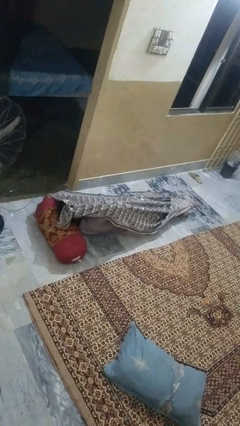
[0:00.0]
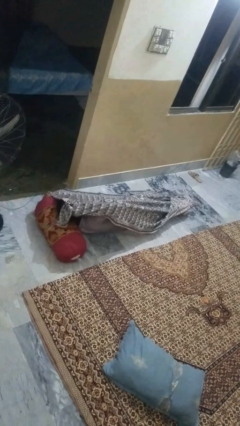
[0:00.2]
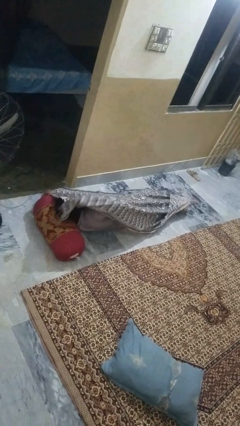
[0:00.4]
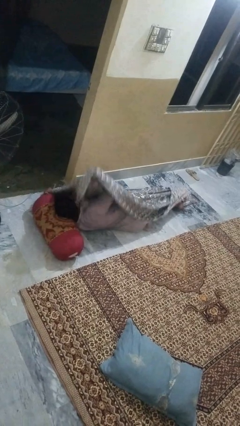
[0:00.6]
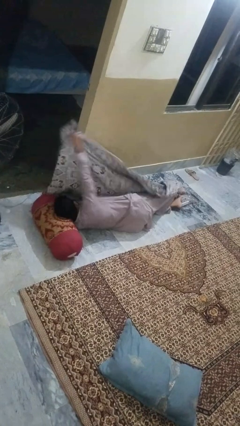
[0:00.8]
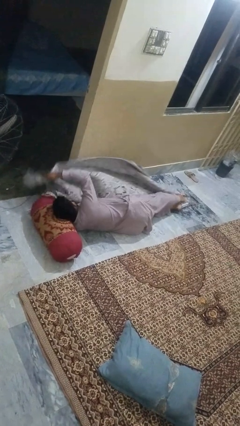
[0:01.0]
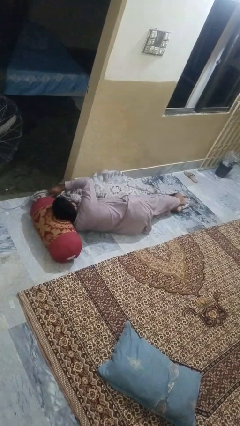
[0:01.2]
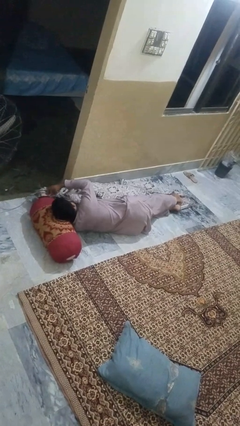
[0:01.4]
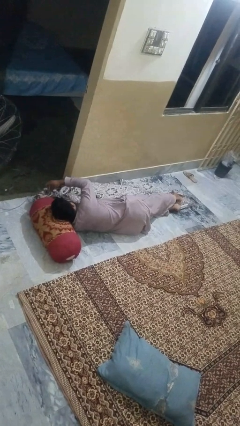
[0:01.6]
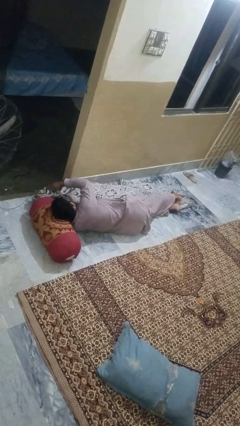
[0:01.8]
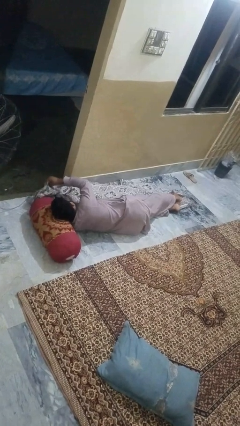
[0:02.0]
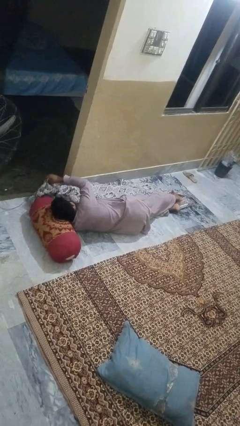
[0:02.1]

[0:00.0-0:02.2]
person uncovers with blanket

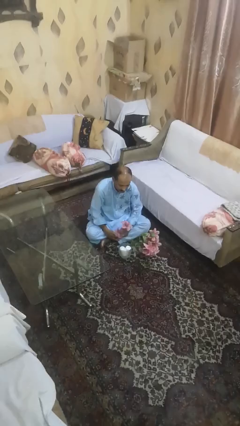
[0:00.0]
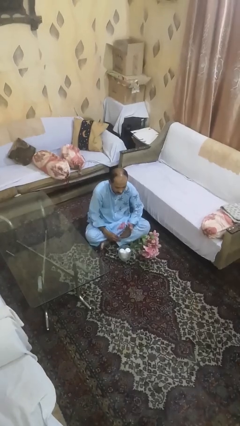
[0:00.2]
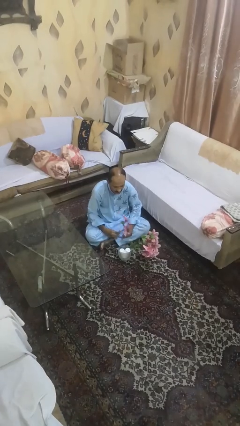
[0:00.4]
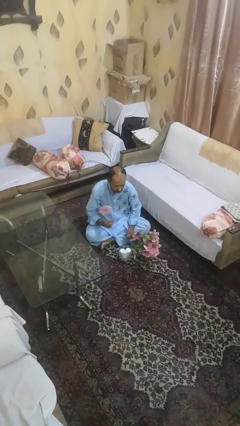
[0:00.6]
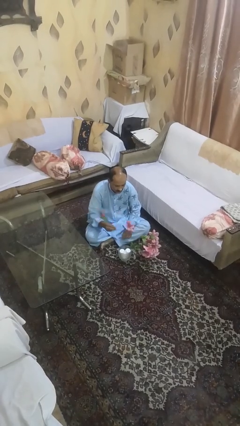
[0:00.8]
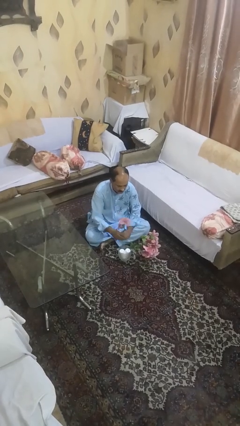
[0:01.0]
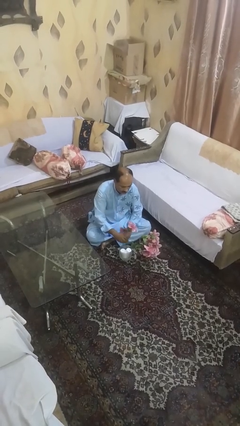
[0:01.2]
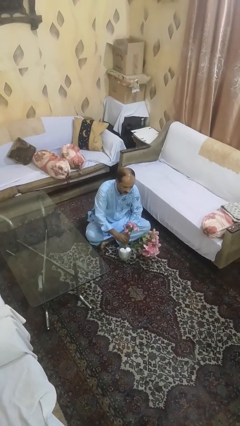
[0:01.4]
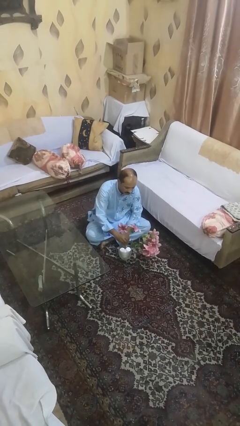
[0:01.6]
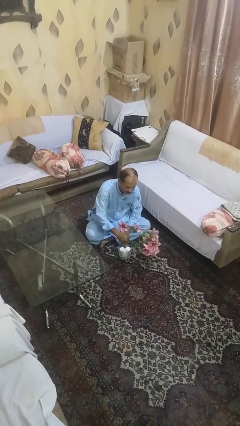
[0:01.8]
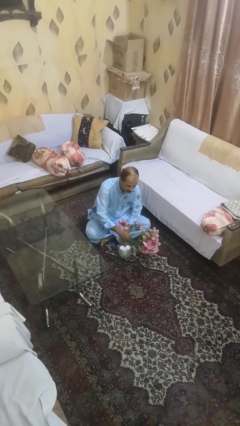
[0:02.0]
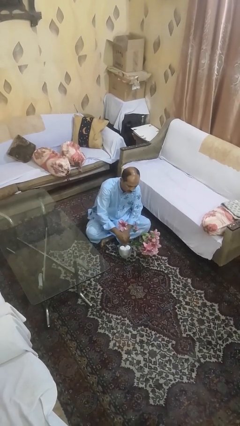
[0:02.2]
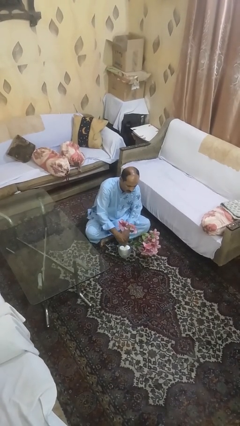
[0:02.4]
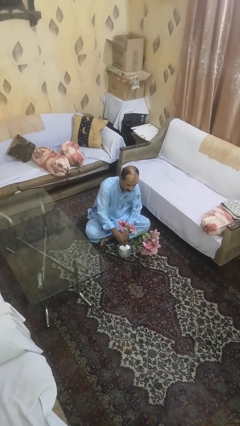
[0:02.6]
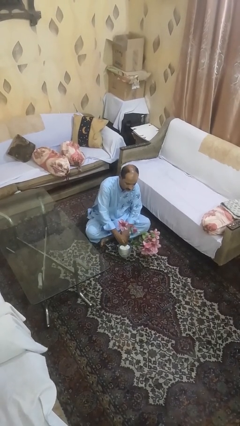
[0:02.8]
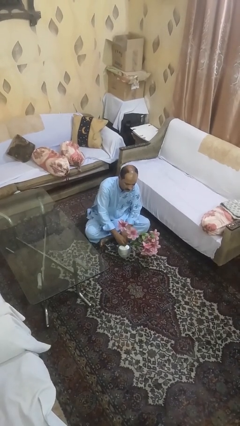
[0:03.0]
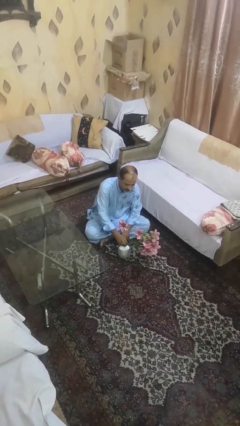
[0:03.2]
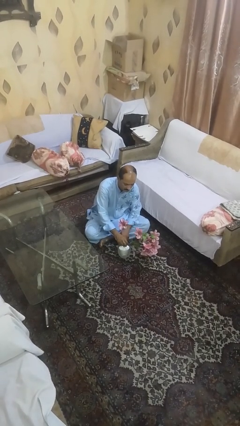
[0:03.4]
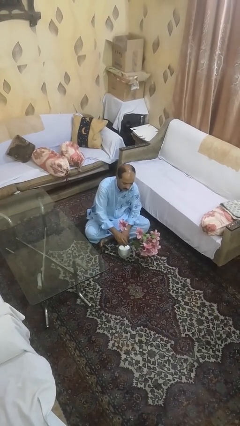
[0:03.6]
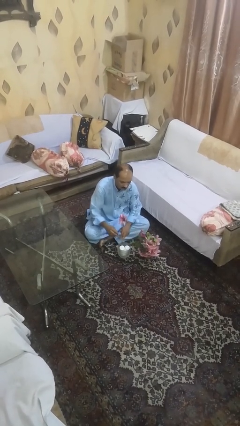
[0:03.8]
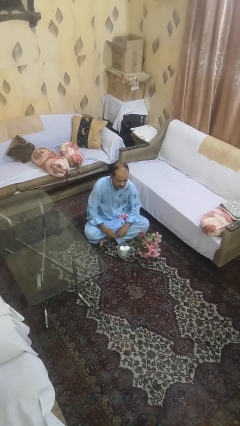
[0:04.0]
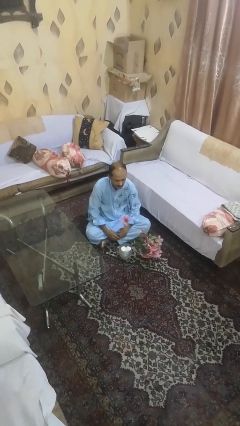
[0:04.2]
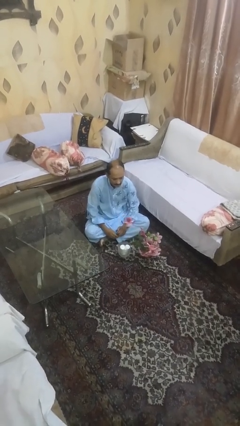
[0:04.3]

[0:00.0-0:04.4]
person arranges flowers in vase

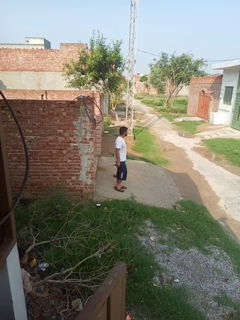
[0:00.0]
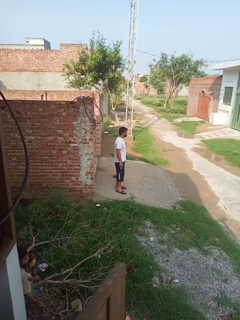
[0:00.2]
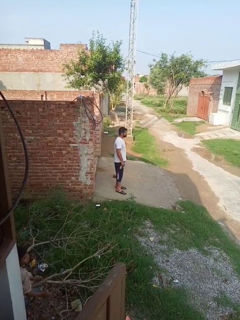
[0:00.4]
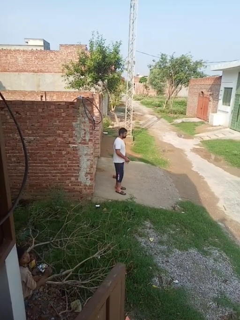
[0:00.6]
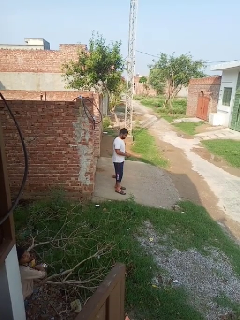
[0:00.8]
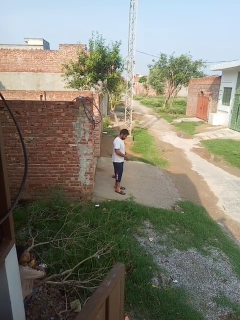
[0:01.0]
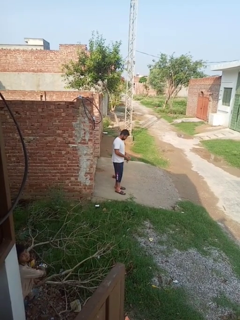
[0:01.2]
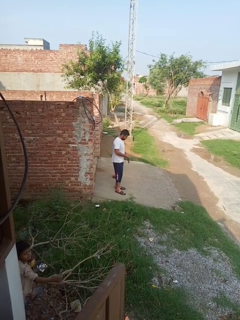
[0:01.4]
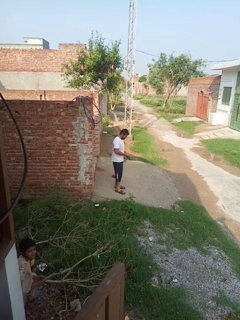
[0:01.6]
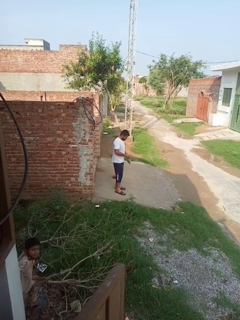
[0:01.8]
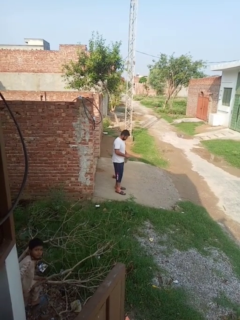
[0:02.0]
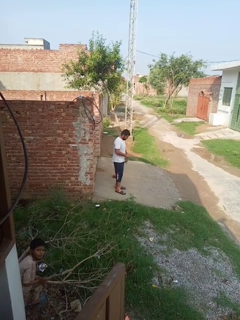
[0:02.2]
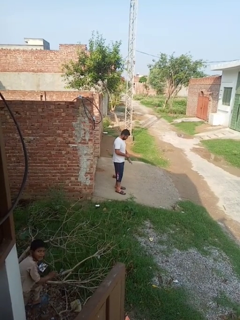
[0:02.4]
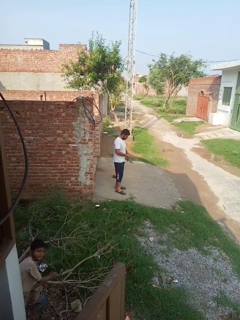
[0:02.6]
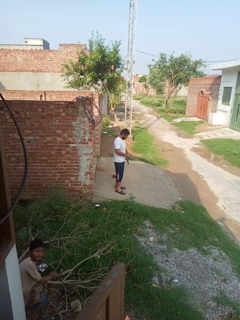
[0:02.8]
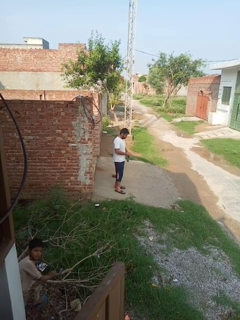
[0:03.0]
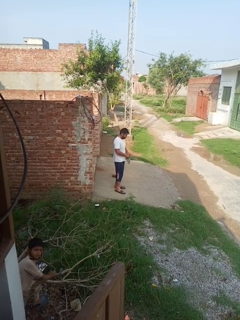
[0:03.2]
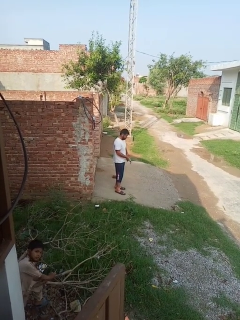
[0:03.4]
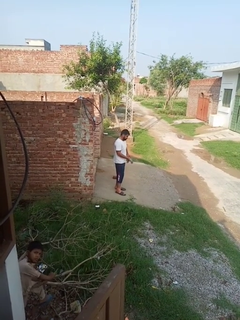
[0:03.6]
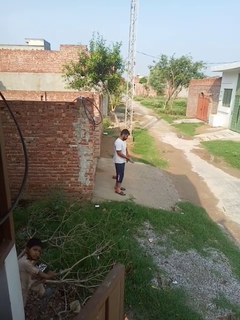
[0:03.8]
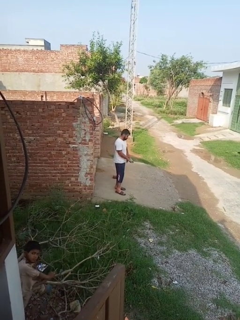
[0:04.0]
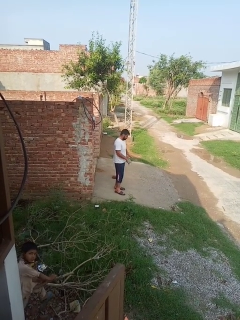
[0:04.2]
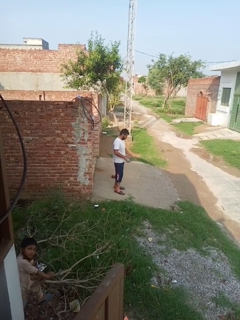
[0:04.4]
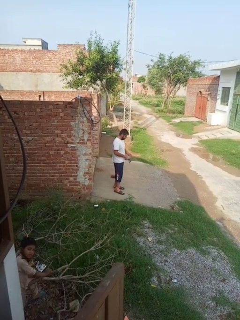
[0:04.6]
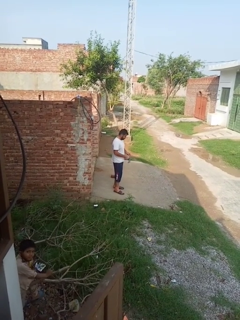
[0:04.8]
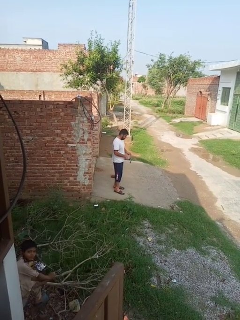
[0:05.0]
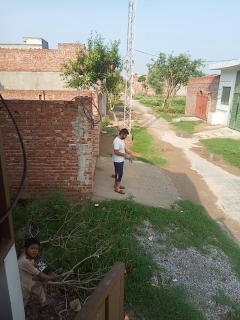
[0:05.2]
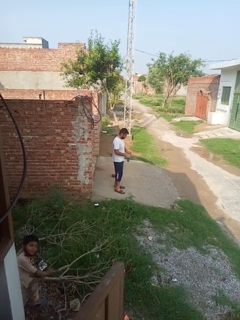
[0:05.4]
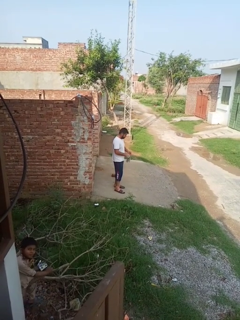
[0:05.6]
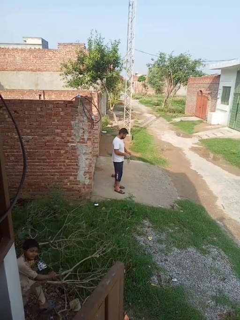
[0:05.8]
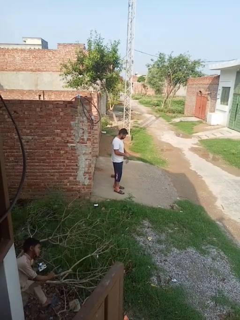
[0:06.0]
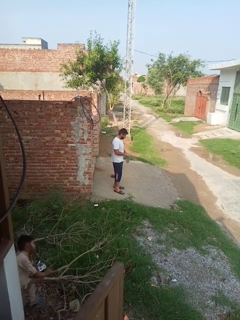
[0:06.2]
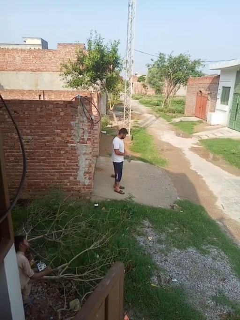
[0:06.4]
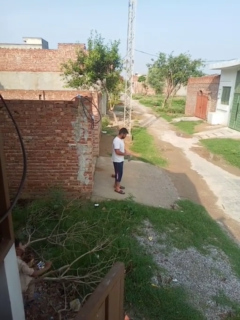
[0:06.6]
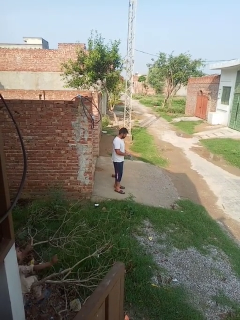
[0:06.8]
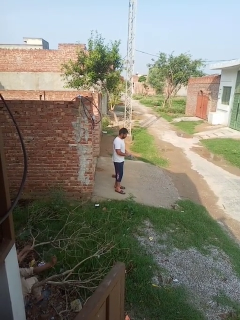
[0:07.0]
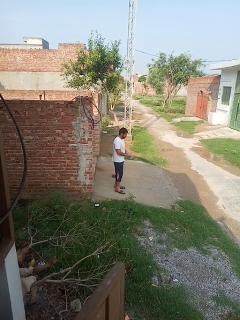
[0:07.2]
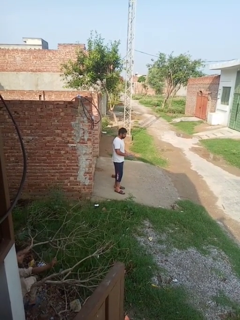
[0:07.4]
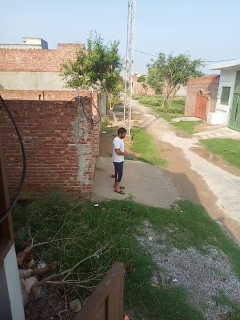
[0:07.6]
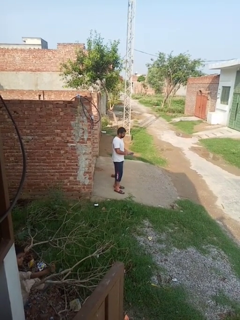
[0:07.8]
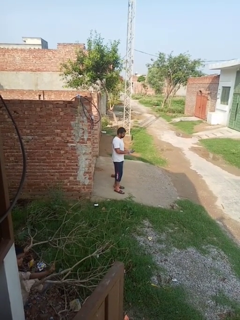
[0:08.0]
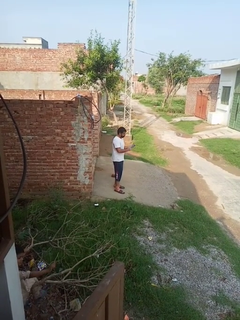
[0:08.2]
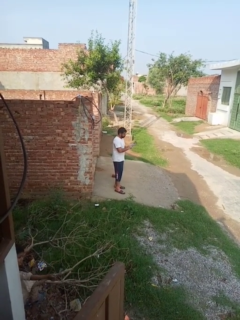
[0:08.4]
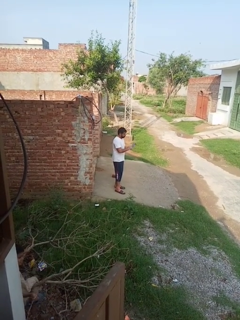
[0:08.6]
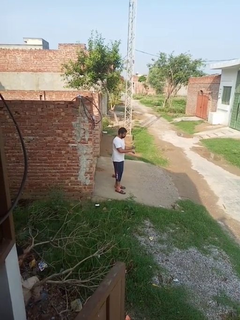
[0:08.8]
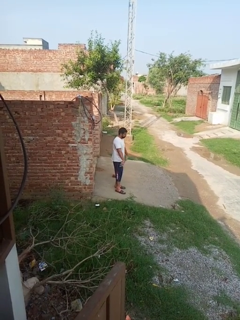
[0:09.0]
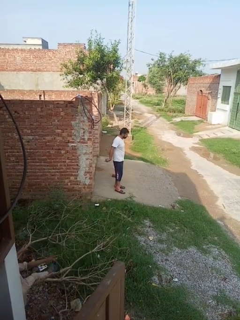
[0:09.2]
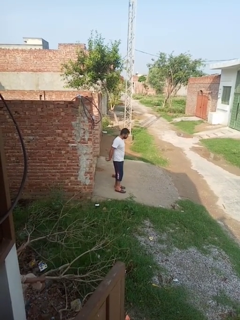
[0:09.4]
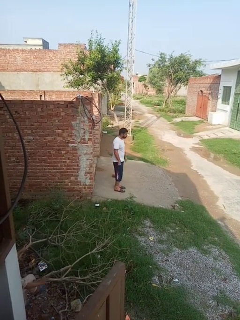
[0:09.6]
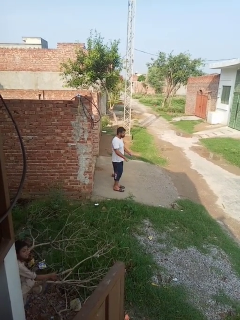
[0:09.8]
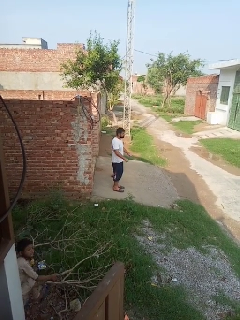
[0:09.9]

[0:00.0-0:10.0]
person puts on gloves

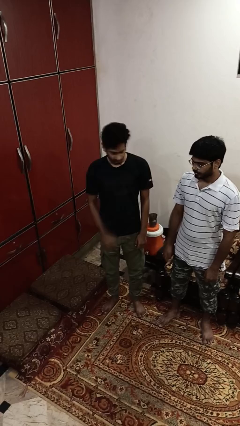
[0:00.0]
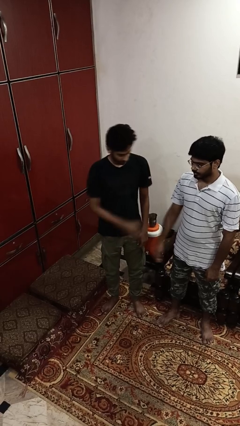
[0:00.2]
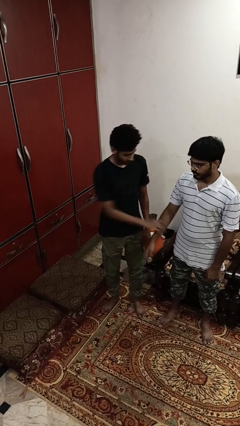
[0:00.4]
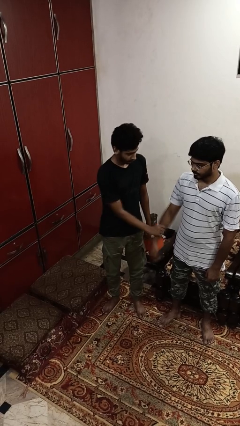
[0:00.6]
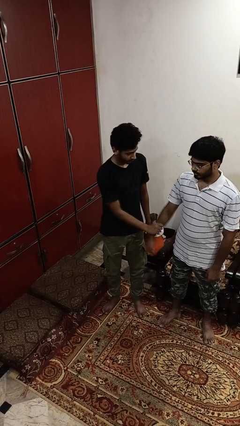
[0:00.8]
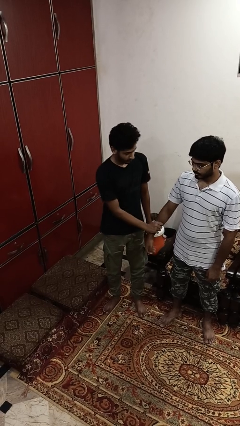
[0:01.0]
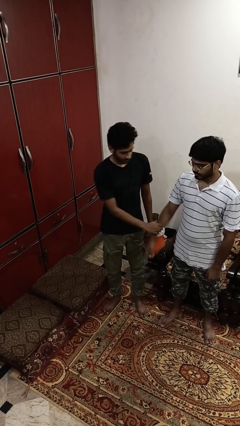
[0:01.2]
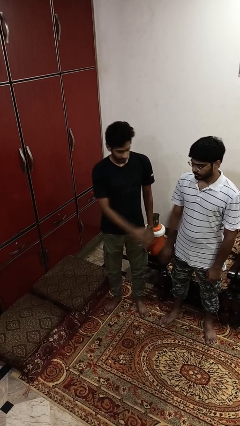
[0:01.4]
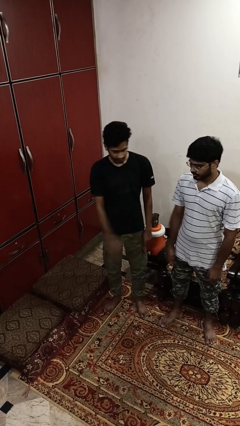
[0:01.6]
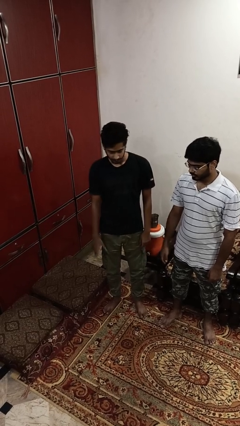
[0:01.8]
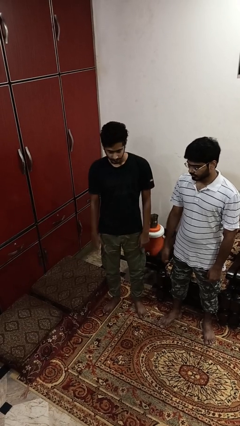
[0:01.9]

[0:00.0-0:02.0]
person grabs person by forearm

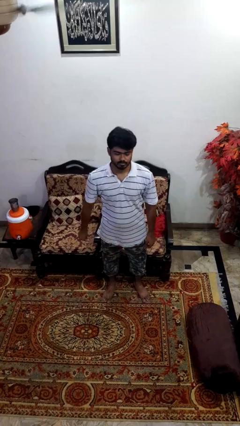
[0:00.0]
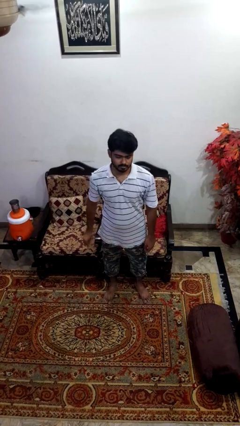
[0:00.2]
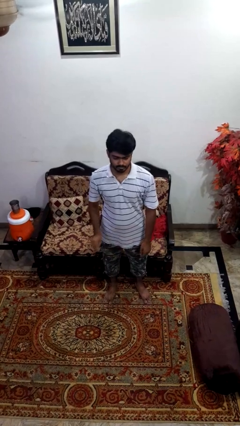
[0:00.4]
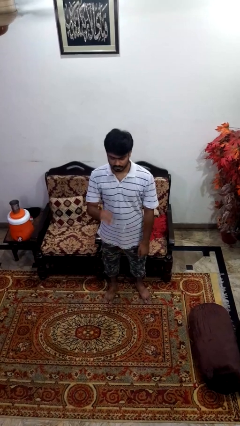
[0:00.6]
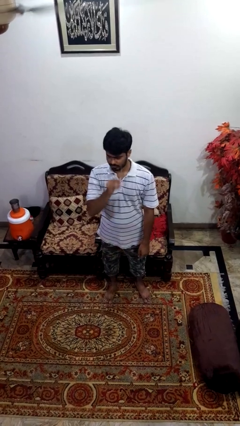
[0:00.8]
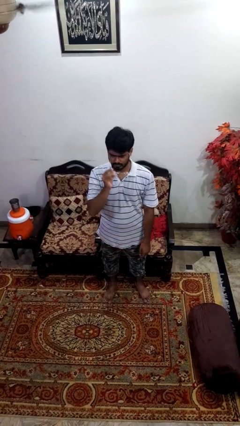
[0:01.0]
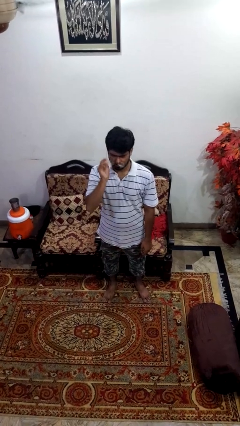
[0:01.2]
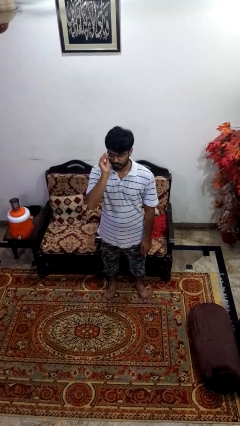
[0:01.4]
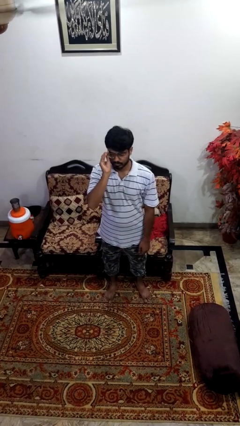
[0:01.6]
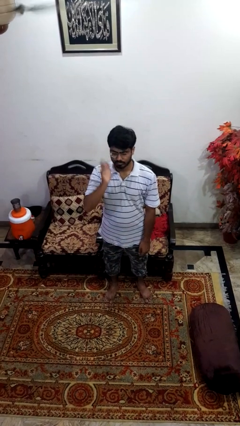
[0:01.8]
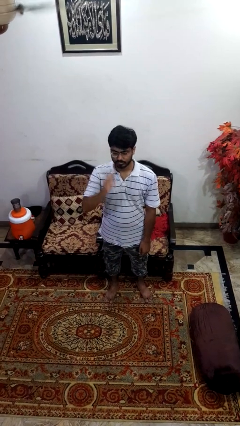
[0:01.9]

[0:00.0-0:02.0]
person puts on glasses
